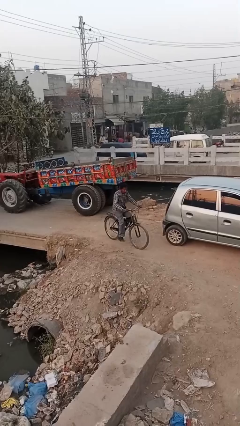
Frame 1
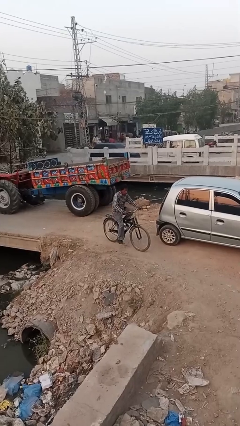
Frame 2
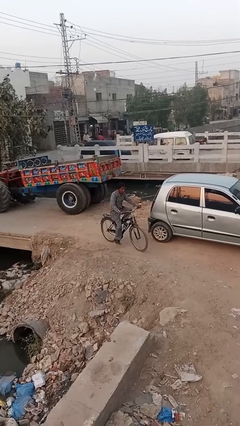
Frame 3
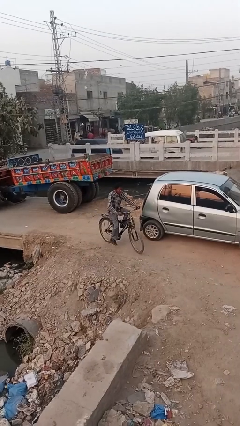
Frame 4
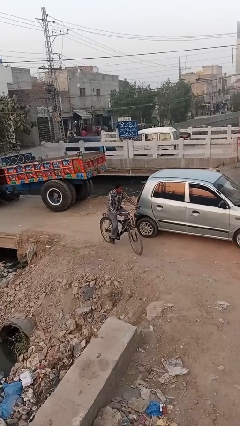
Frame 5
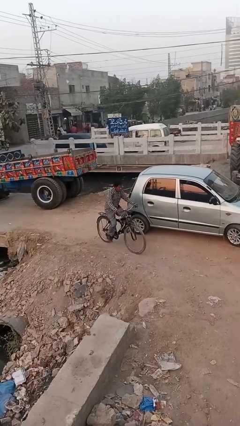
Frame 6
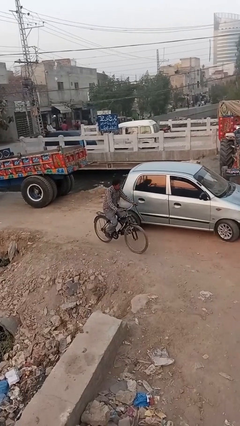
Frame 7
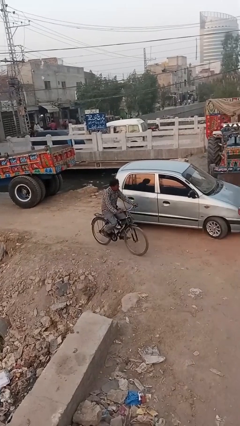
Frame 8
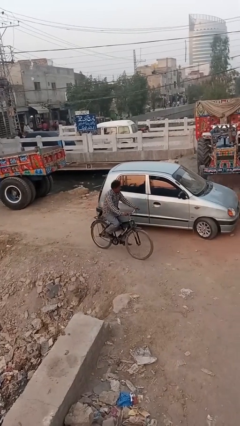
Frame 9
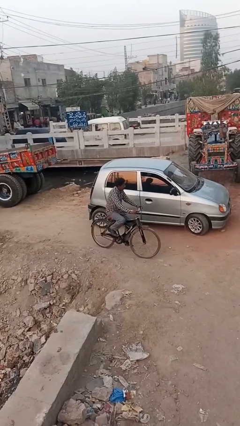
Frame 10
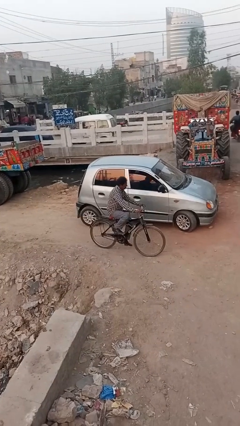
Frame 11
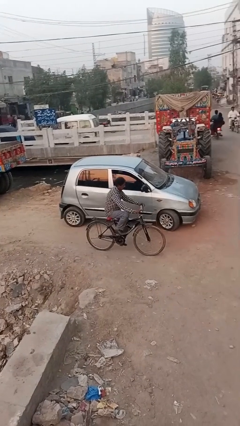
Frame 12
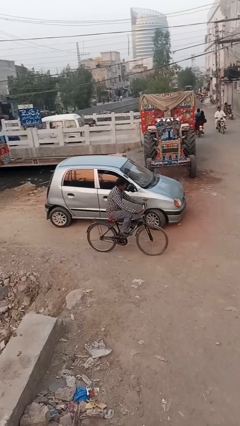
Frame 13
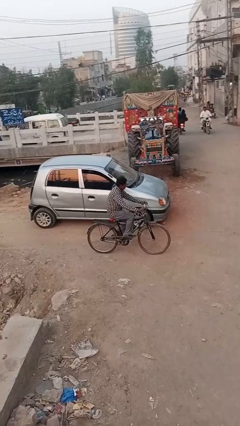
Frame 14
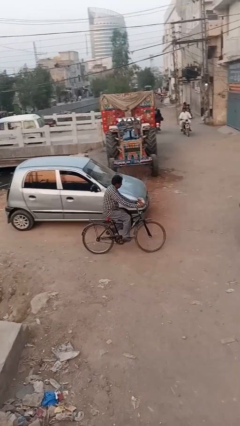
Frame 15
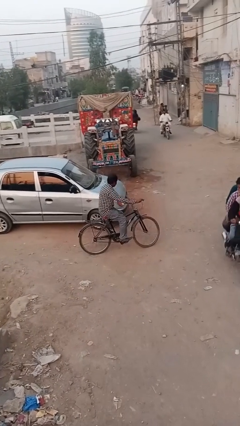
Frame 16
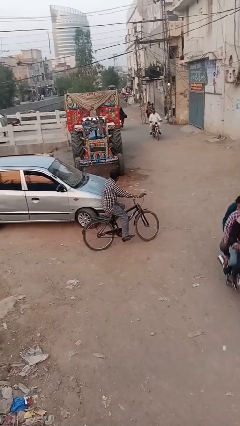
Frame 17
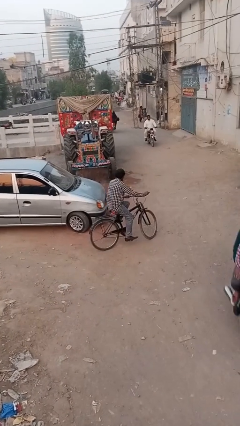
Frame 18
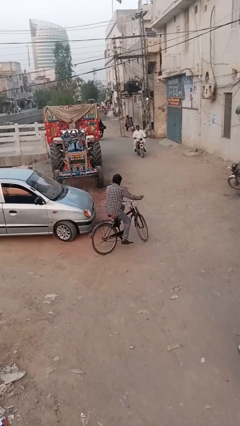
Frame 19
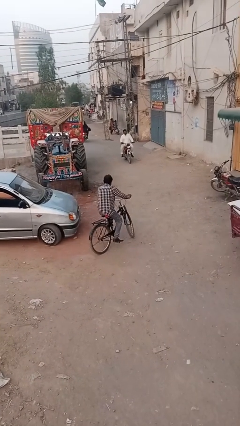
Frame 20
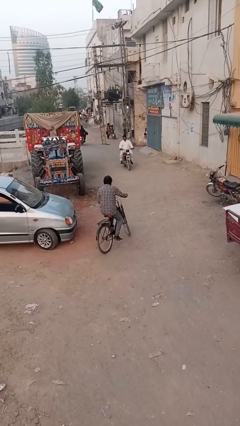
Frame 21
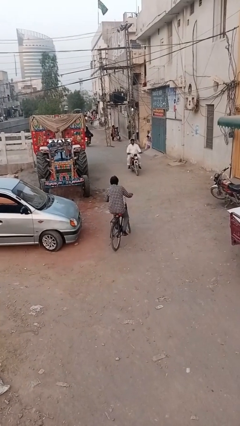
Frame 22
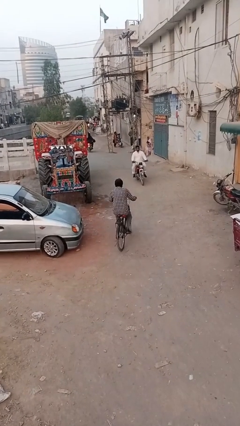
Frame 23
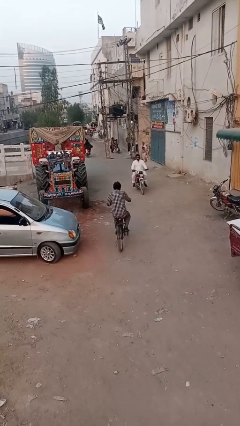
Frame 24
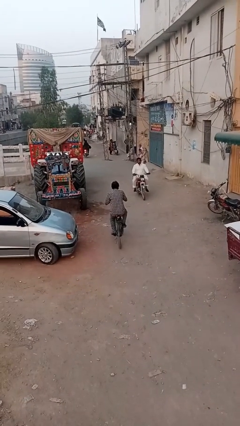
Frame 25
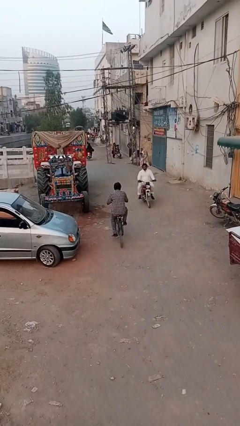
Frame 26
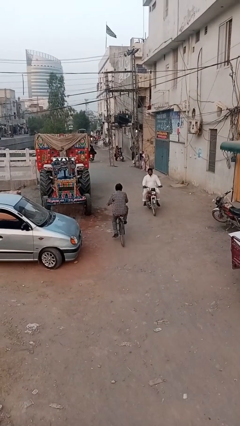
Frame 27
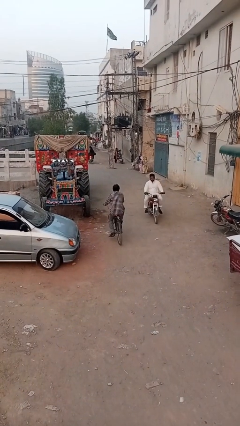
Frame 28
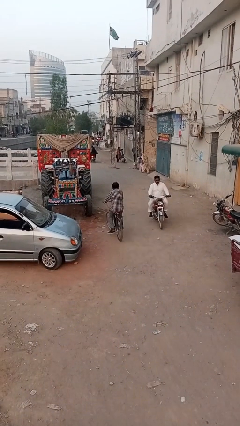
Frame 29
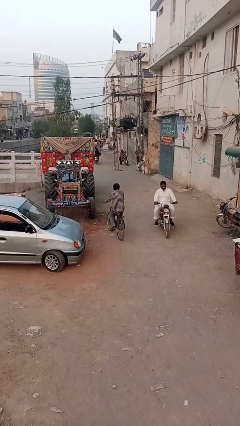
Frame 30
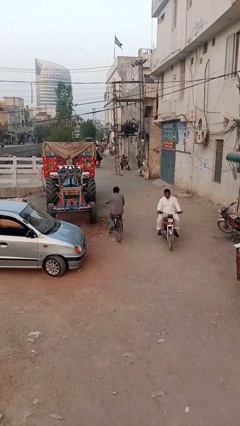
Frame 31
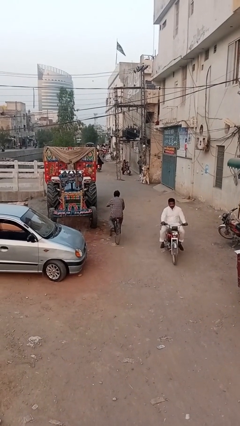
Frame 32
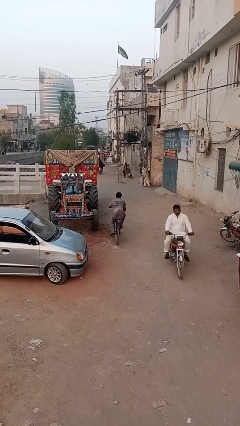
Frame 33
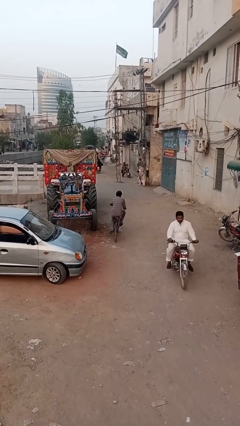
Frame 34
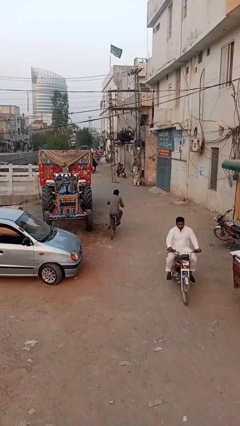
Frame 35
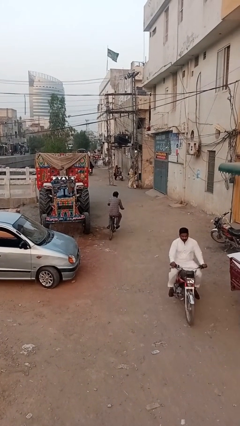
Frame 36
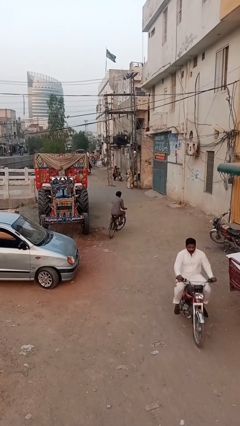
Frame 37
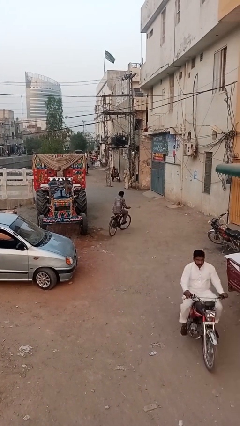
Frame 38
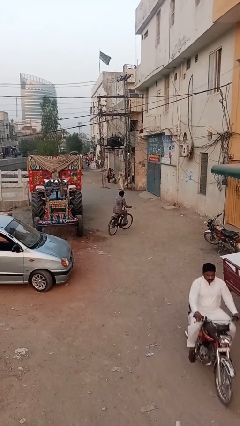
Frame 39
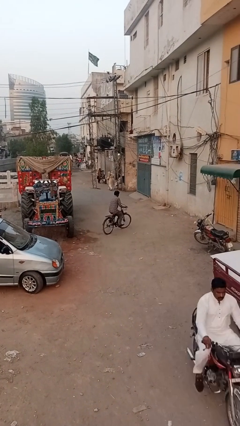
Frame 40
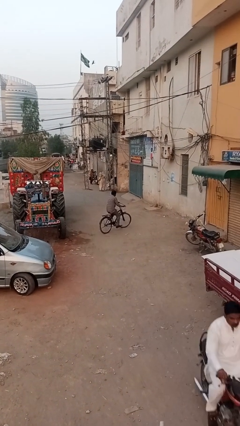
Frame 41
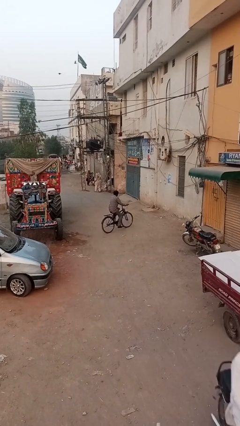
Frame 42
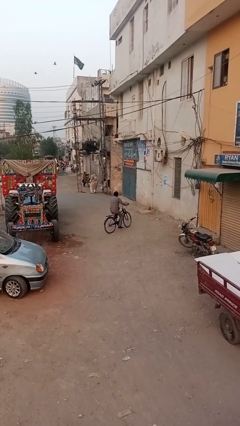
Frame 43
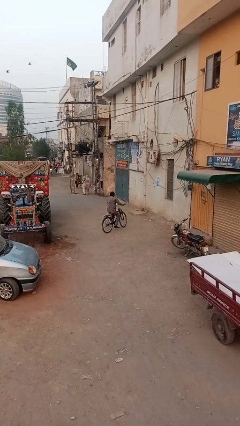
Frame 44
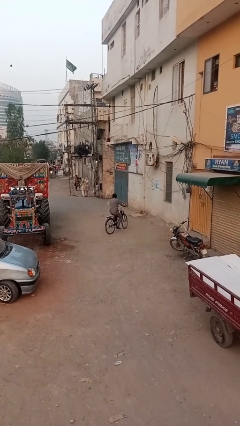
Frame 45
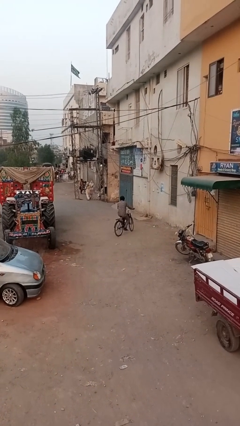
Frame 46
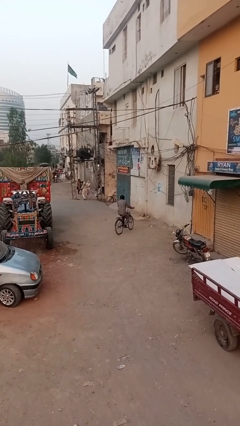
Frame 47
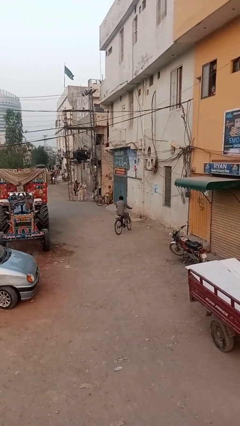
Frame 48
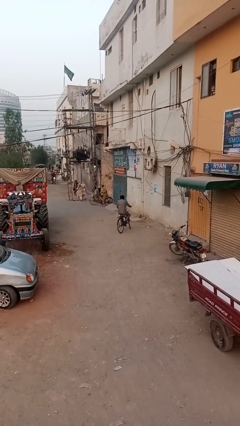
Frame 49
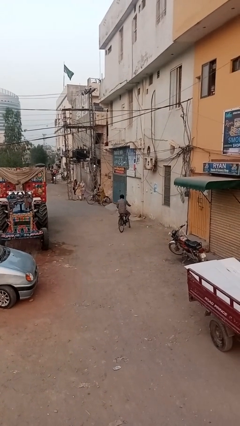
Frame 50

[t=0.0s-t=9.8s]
person rides bicycle

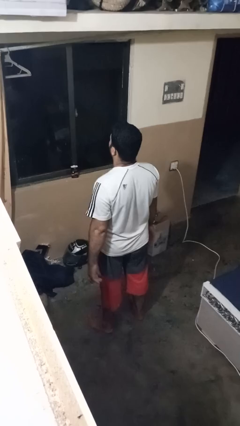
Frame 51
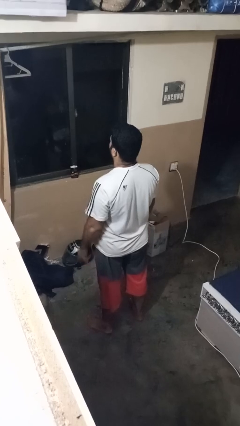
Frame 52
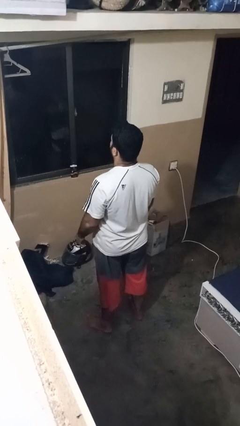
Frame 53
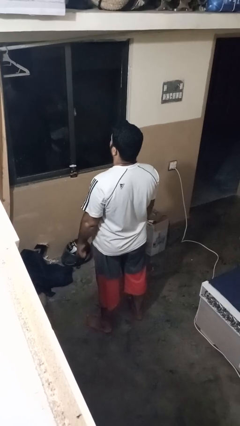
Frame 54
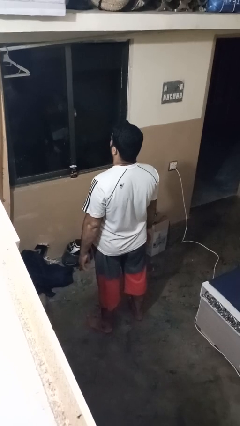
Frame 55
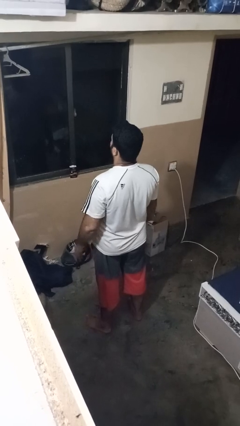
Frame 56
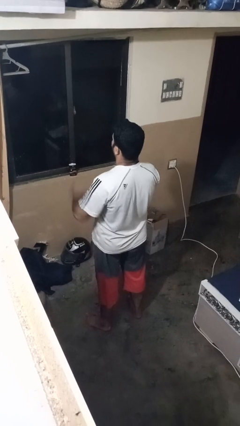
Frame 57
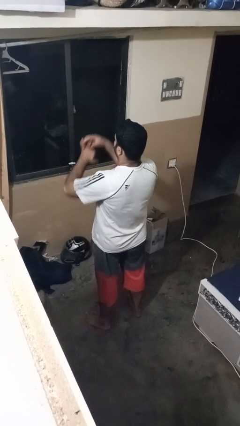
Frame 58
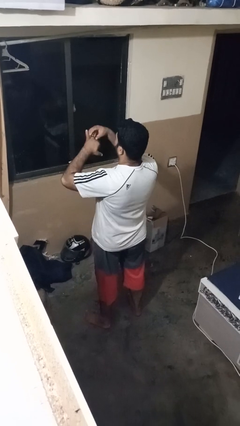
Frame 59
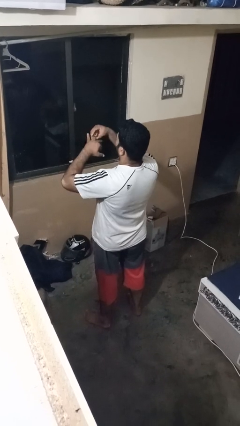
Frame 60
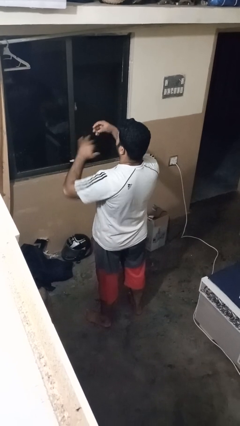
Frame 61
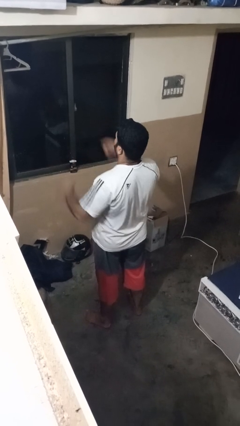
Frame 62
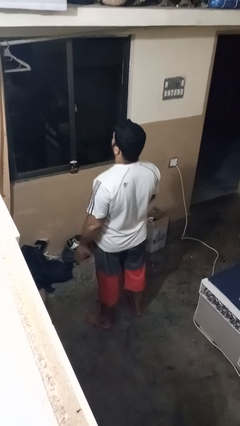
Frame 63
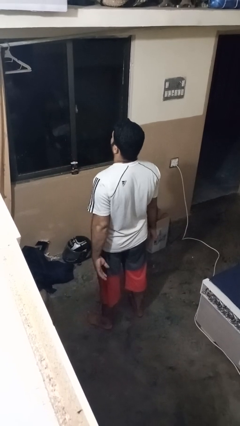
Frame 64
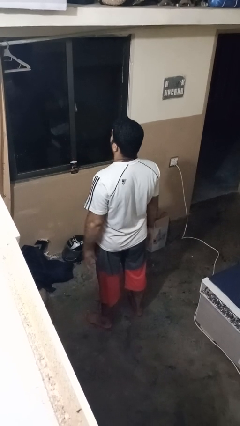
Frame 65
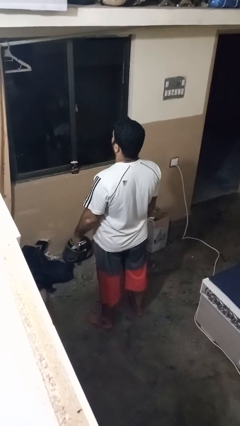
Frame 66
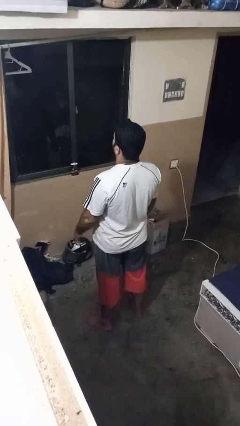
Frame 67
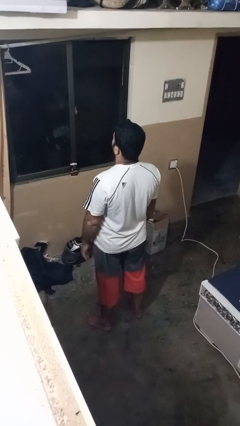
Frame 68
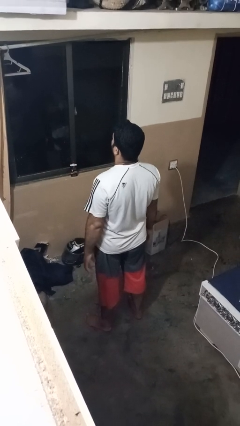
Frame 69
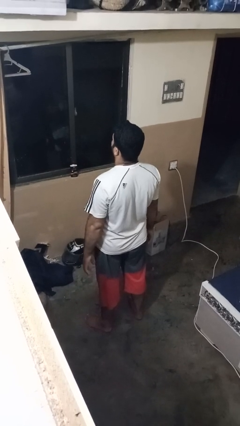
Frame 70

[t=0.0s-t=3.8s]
person takes off ring

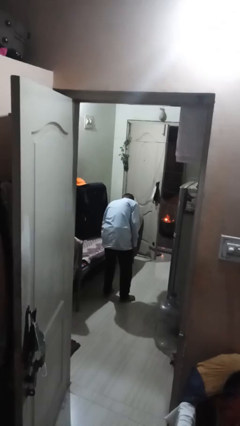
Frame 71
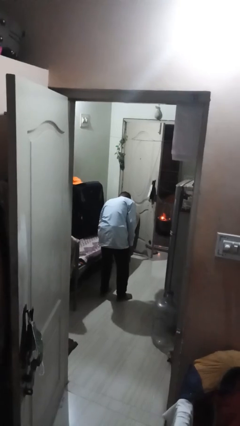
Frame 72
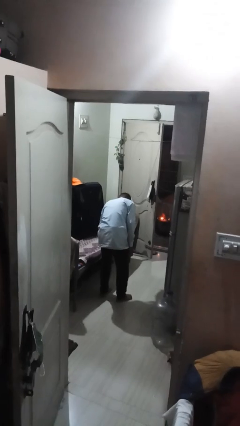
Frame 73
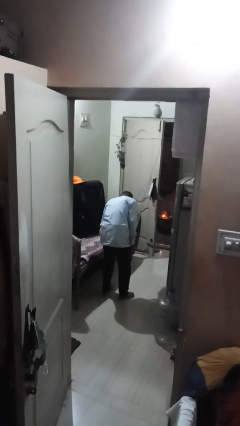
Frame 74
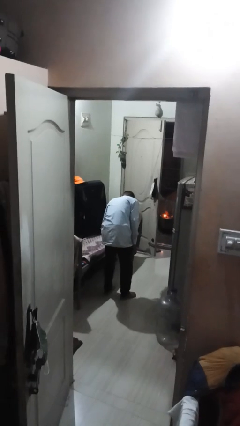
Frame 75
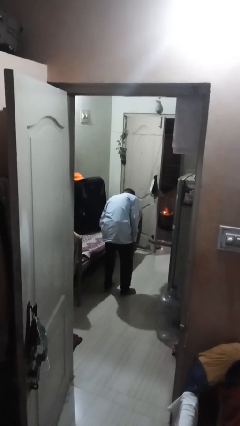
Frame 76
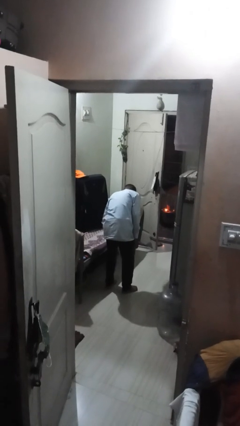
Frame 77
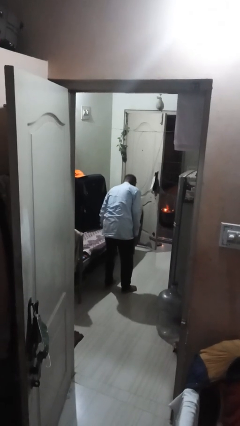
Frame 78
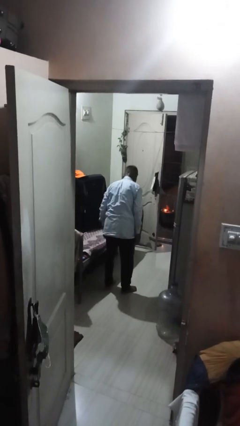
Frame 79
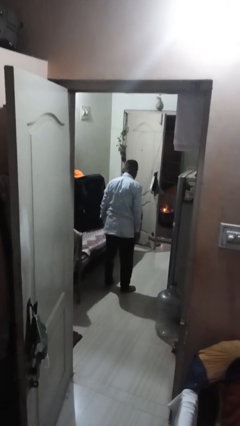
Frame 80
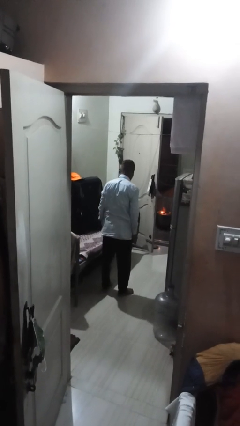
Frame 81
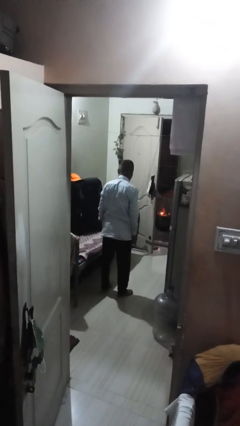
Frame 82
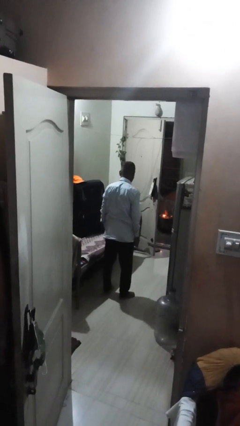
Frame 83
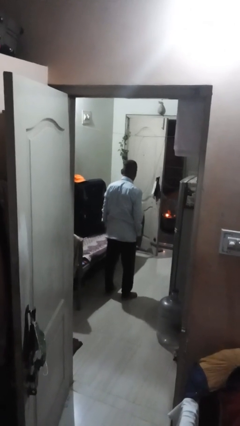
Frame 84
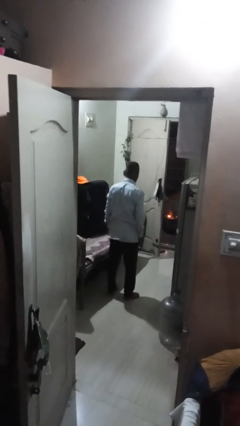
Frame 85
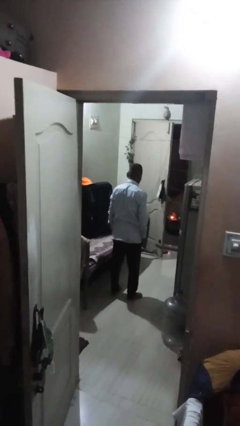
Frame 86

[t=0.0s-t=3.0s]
person swats bug

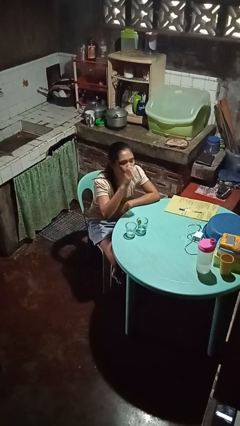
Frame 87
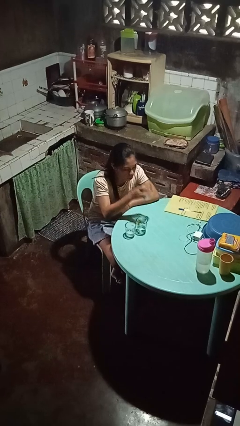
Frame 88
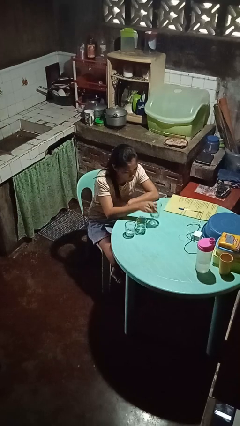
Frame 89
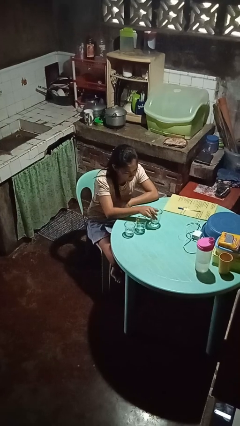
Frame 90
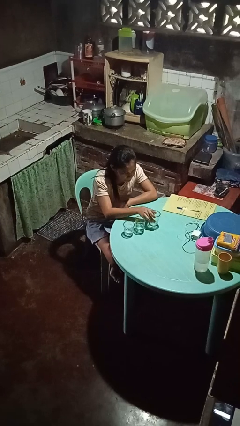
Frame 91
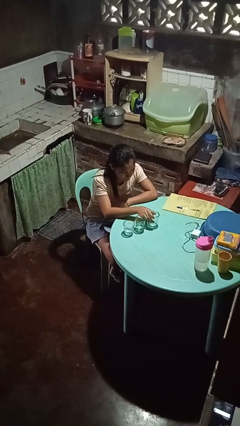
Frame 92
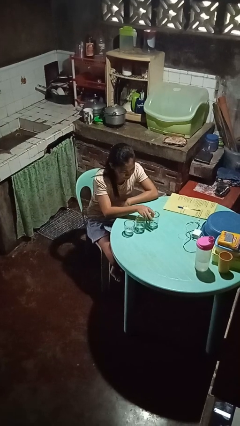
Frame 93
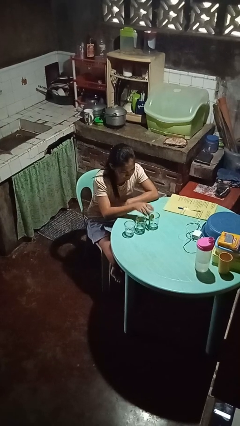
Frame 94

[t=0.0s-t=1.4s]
person puts down object on table
